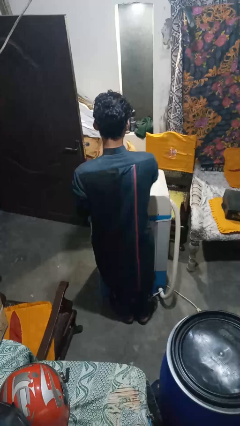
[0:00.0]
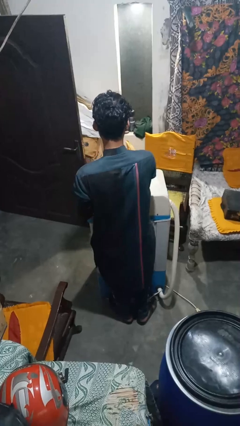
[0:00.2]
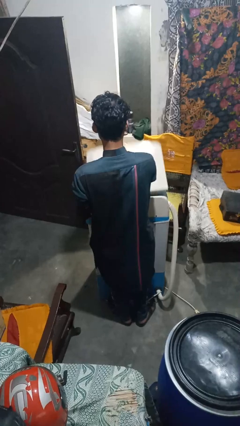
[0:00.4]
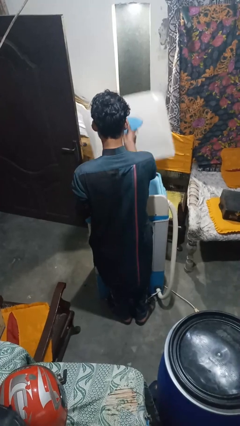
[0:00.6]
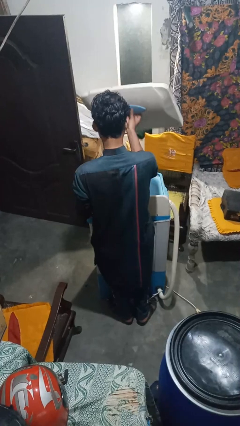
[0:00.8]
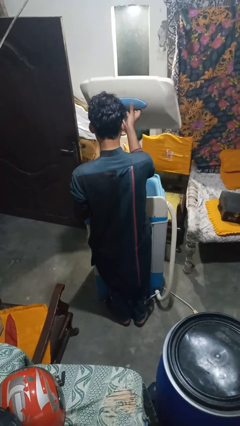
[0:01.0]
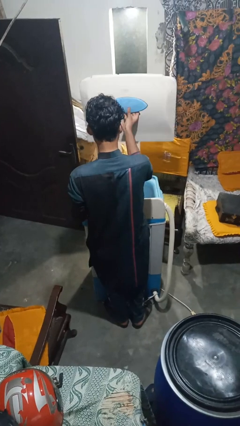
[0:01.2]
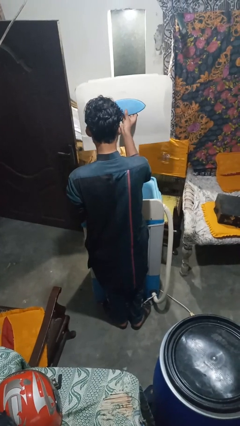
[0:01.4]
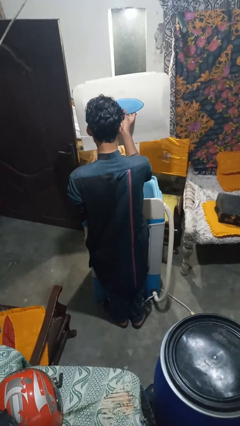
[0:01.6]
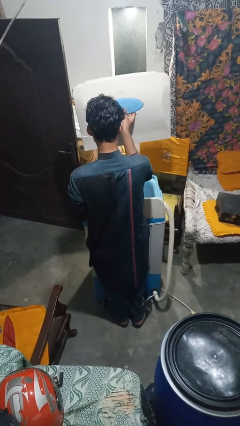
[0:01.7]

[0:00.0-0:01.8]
person opens clothes washer

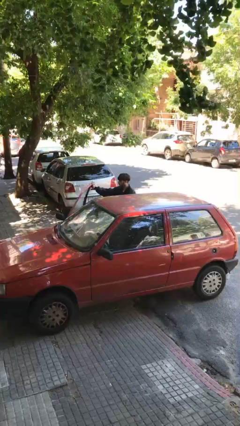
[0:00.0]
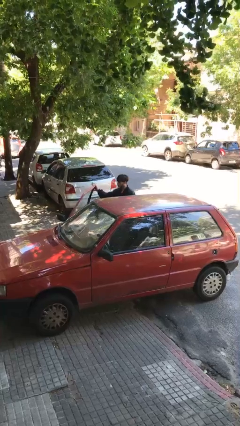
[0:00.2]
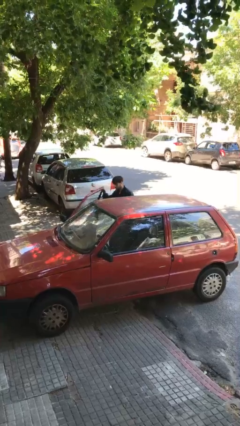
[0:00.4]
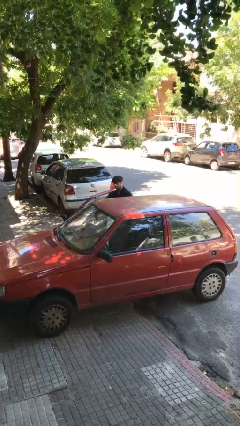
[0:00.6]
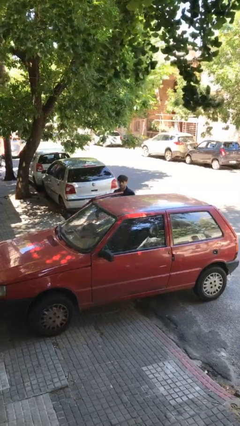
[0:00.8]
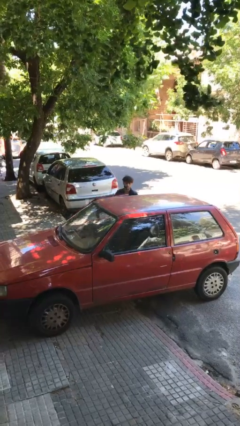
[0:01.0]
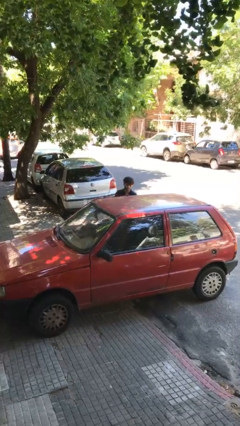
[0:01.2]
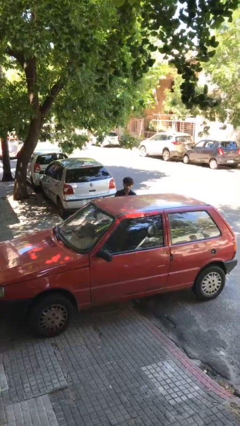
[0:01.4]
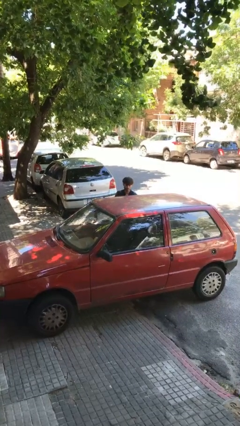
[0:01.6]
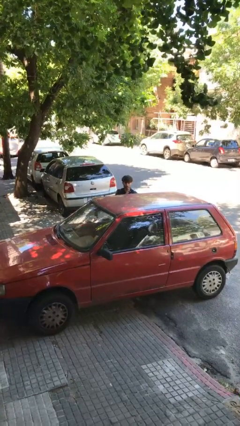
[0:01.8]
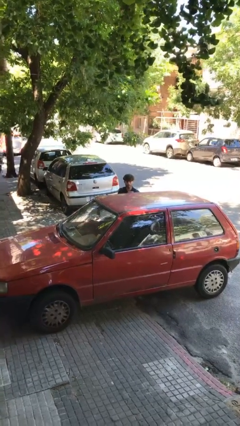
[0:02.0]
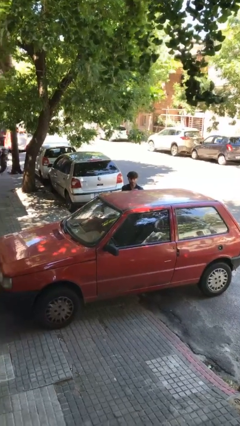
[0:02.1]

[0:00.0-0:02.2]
person closes car door

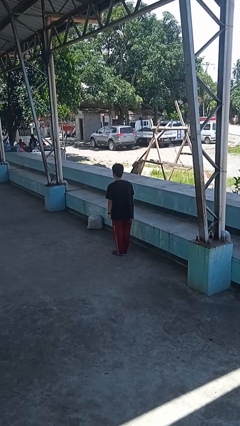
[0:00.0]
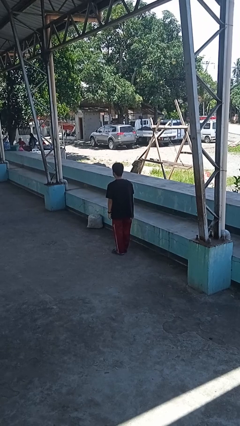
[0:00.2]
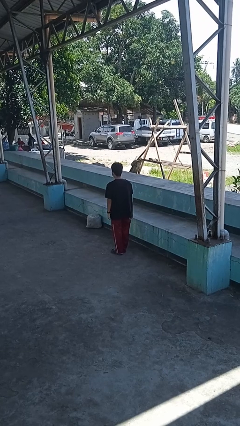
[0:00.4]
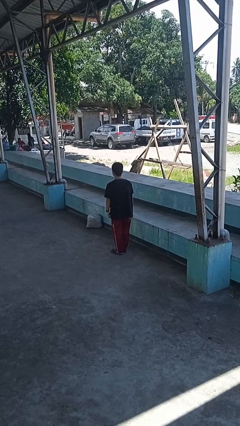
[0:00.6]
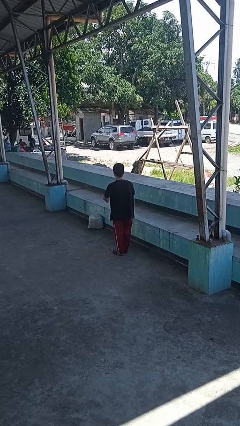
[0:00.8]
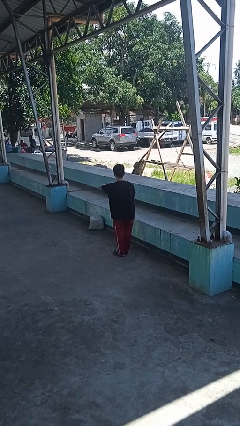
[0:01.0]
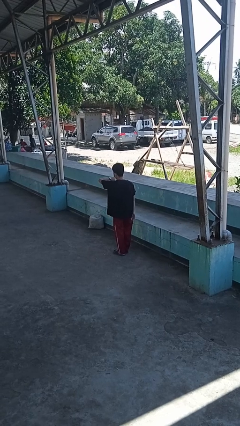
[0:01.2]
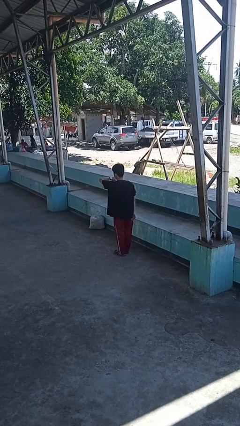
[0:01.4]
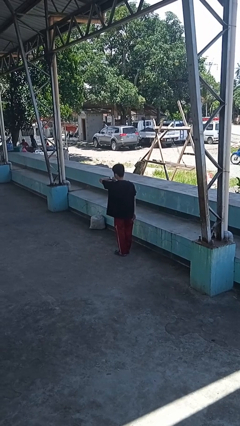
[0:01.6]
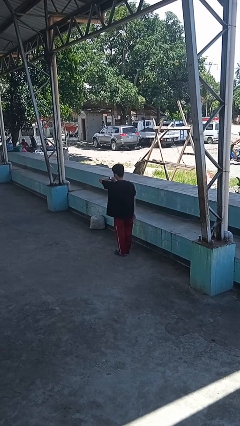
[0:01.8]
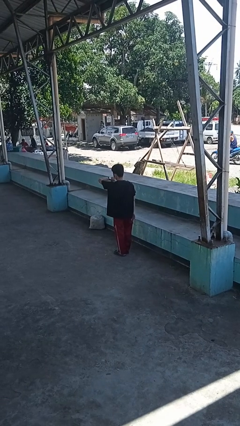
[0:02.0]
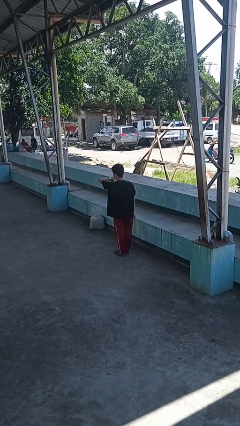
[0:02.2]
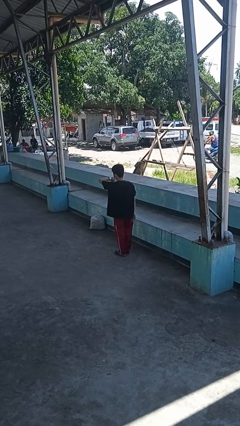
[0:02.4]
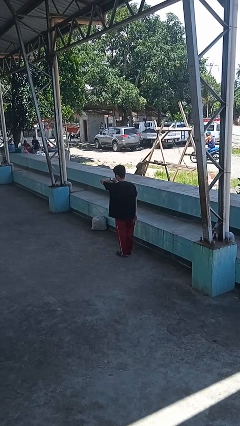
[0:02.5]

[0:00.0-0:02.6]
person looks at wristwatch

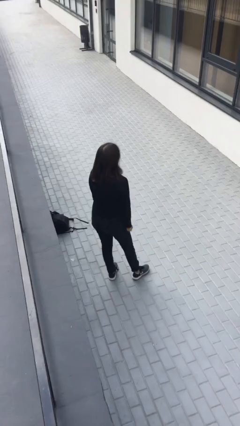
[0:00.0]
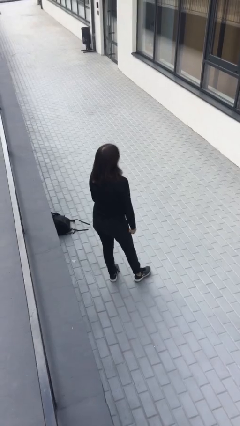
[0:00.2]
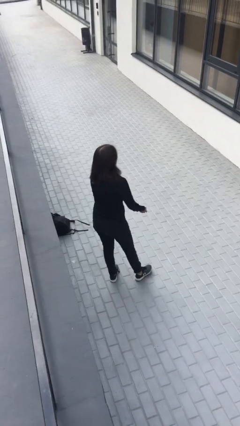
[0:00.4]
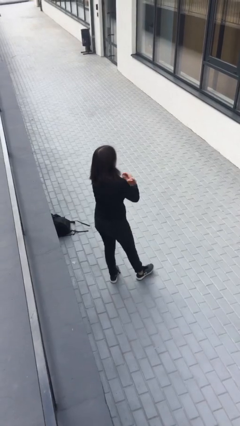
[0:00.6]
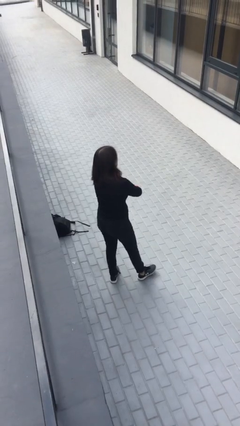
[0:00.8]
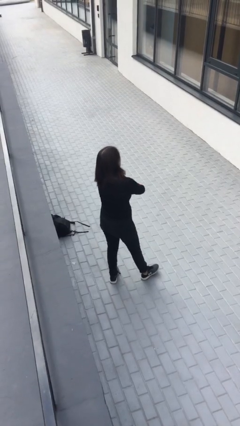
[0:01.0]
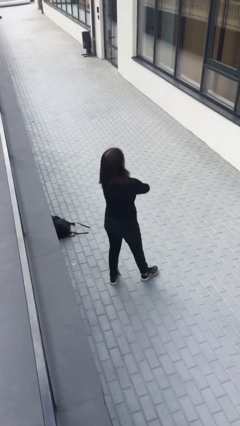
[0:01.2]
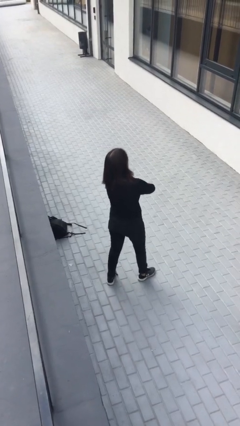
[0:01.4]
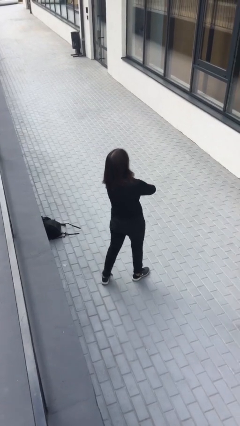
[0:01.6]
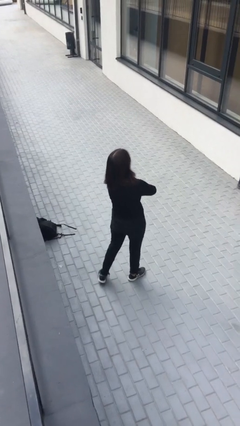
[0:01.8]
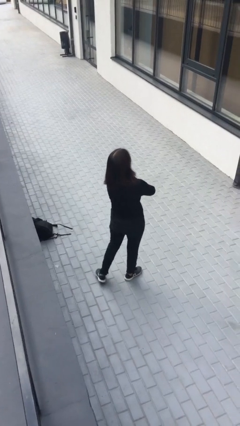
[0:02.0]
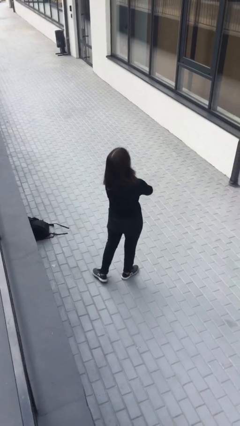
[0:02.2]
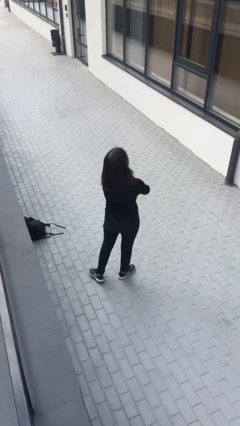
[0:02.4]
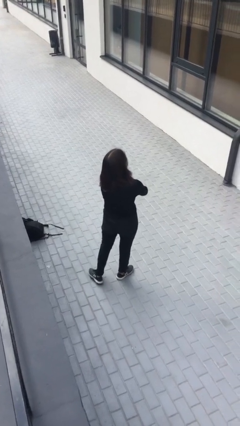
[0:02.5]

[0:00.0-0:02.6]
person crosses arms

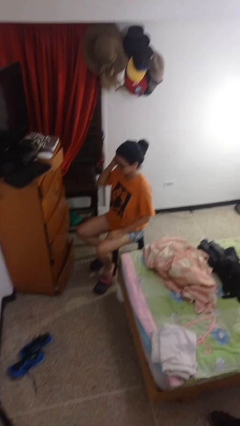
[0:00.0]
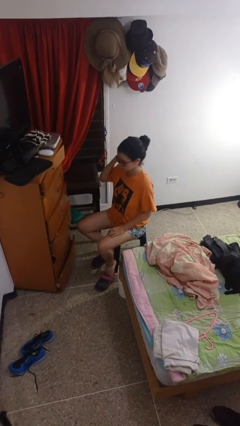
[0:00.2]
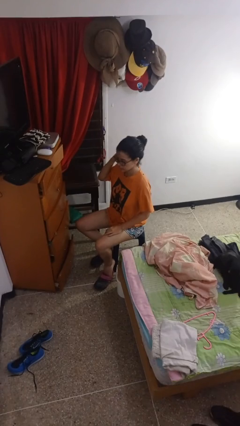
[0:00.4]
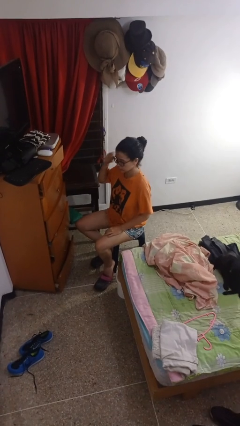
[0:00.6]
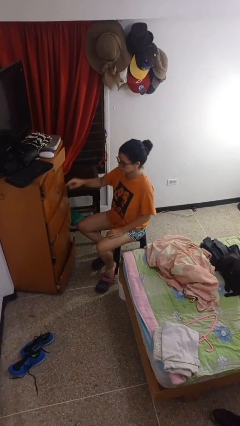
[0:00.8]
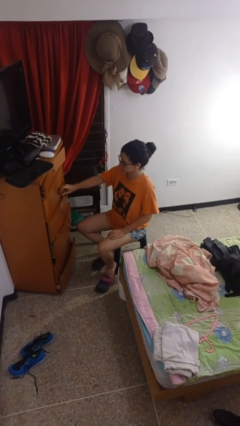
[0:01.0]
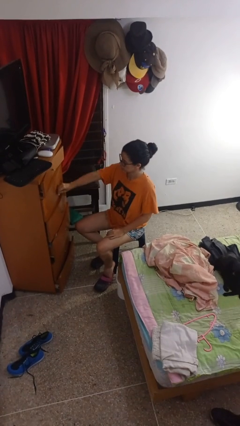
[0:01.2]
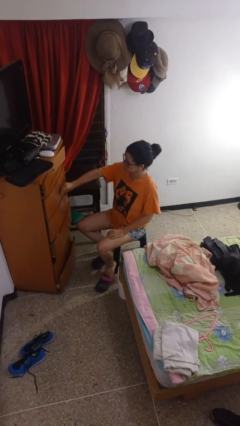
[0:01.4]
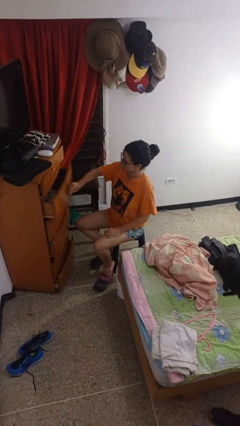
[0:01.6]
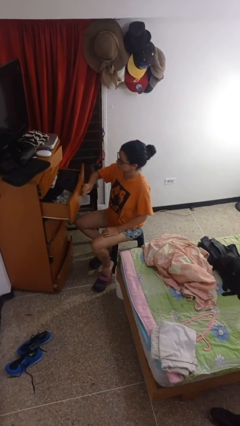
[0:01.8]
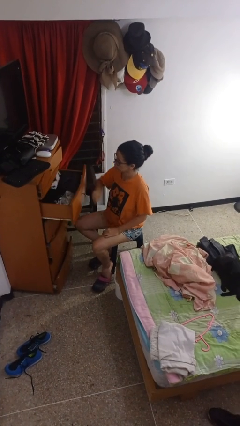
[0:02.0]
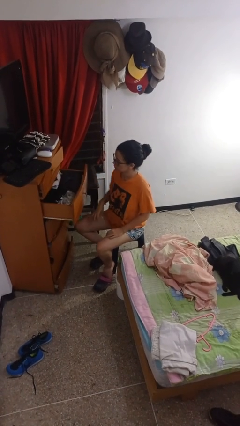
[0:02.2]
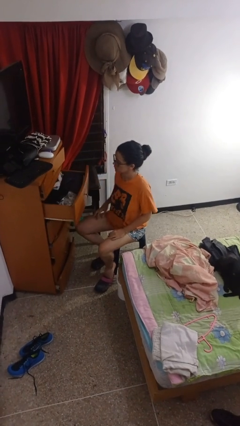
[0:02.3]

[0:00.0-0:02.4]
person opens dresser drawer

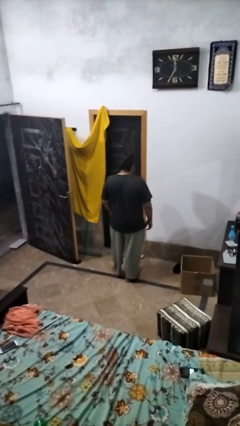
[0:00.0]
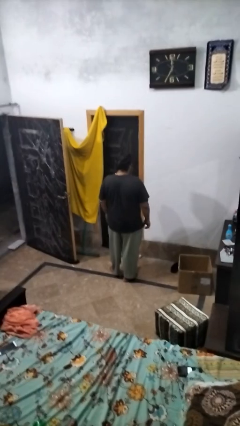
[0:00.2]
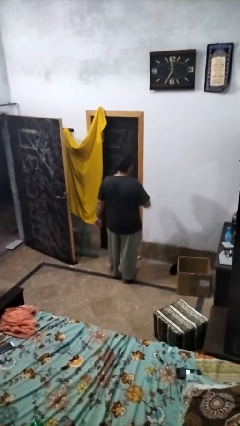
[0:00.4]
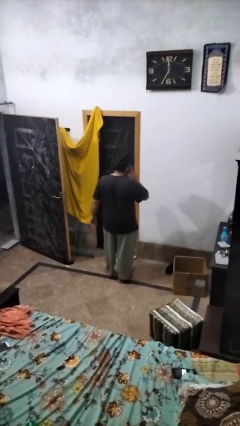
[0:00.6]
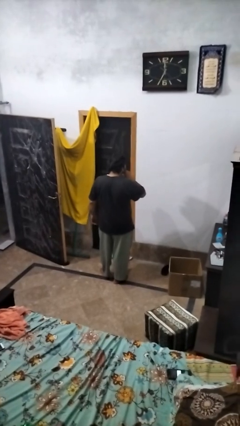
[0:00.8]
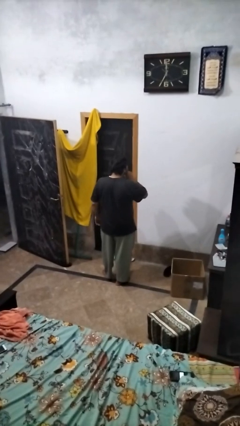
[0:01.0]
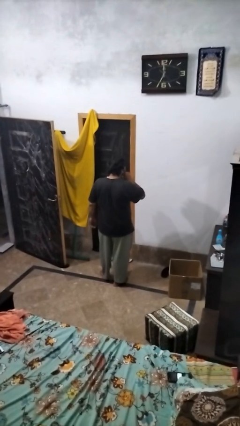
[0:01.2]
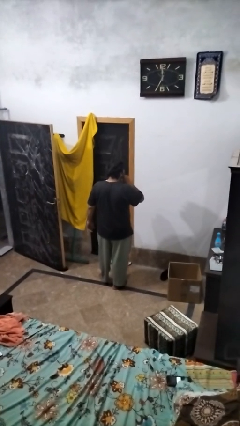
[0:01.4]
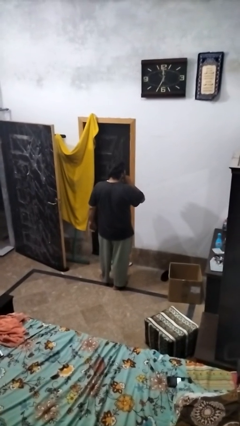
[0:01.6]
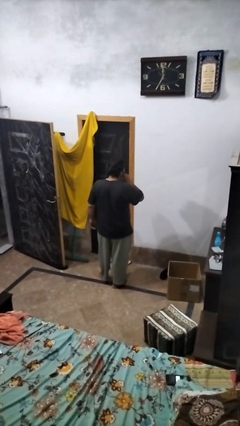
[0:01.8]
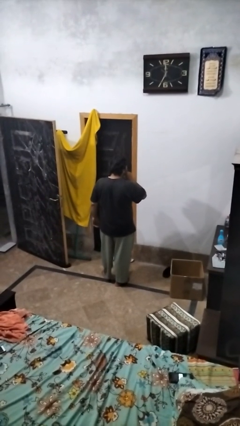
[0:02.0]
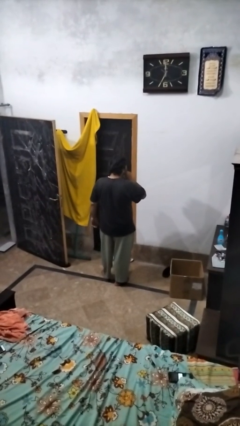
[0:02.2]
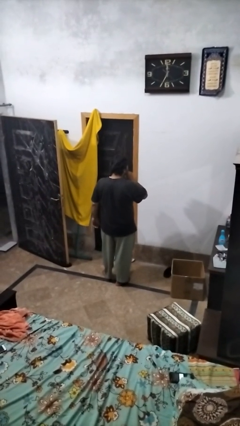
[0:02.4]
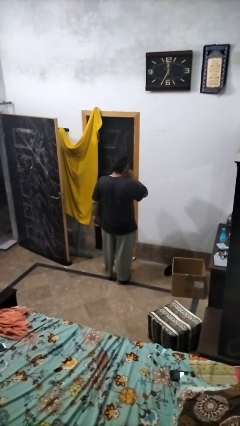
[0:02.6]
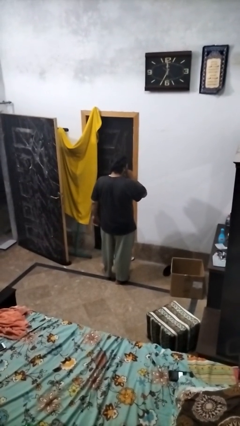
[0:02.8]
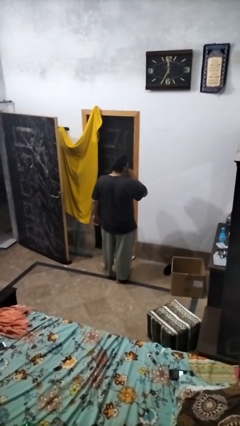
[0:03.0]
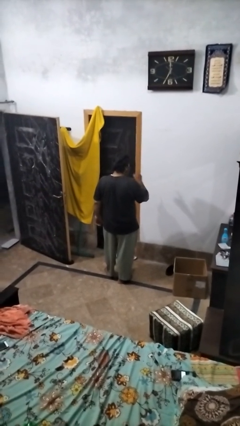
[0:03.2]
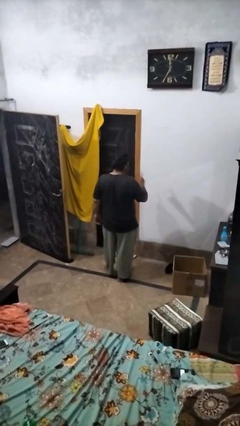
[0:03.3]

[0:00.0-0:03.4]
person gestures be quiet

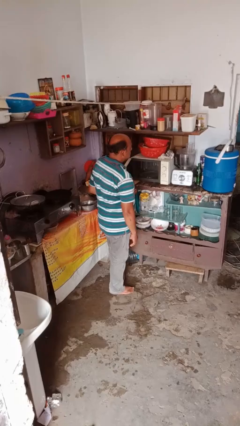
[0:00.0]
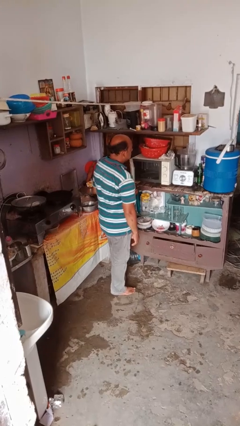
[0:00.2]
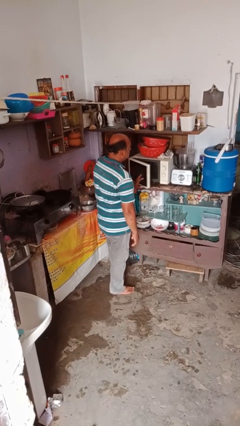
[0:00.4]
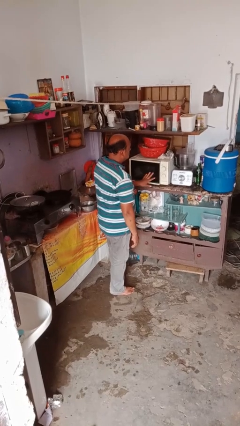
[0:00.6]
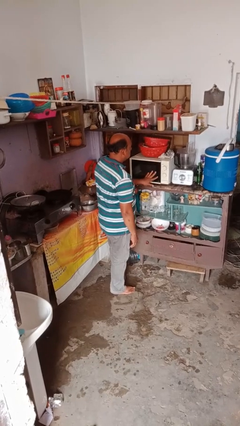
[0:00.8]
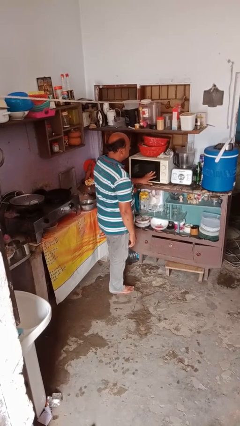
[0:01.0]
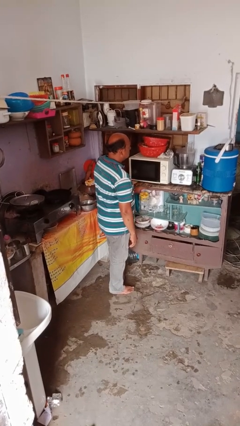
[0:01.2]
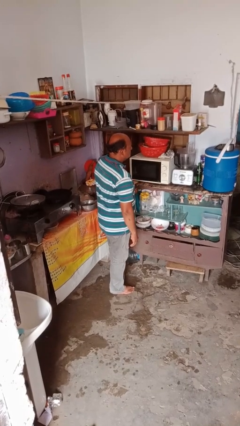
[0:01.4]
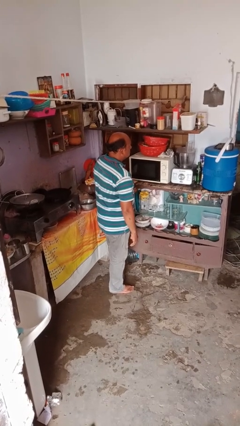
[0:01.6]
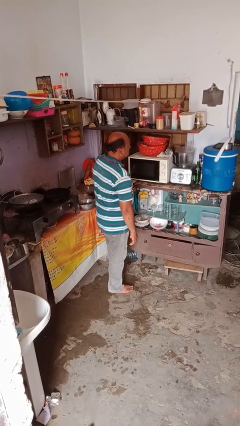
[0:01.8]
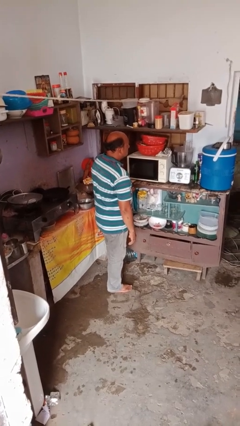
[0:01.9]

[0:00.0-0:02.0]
person closes microwave
